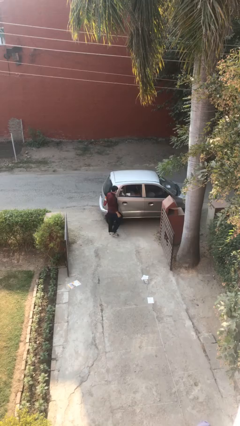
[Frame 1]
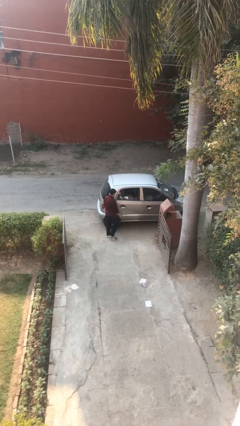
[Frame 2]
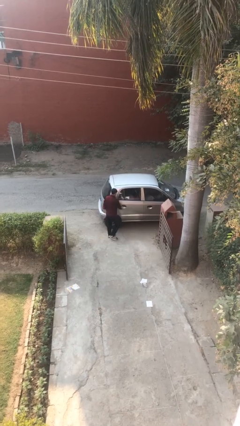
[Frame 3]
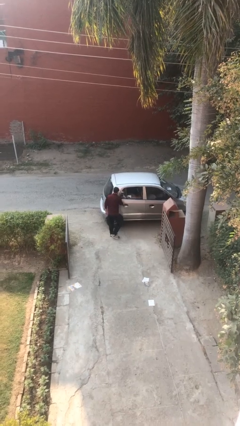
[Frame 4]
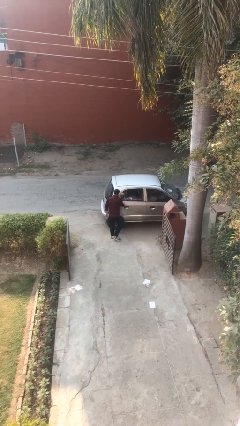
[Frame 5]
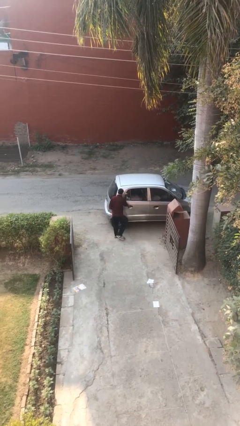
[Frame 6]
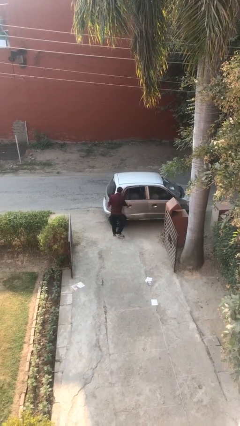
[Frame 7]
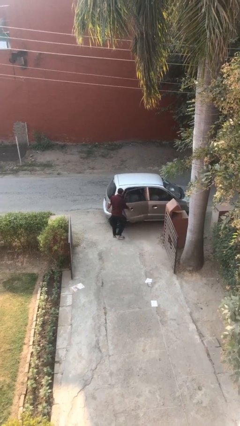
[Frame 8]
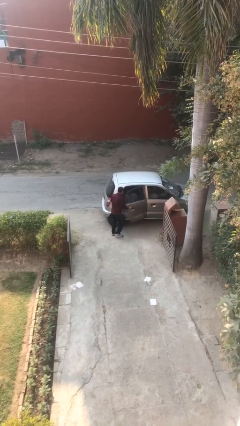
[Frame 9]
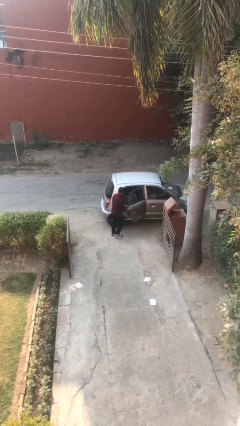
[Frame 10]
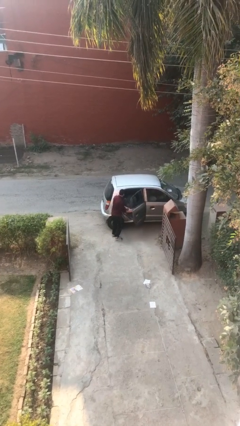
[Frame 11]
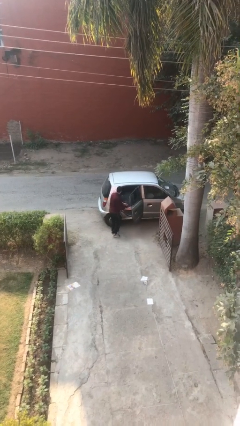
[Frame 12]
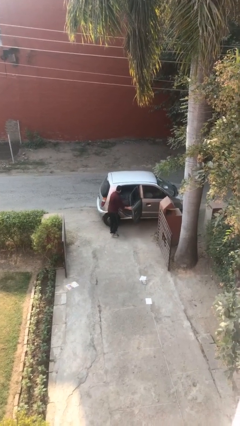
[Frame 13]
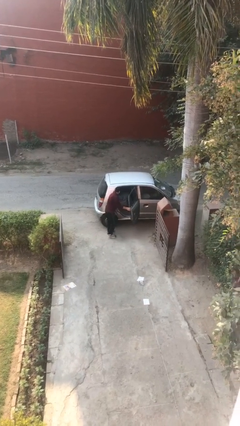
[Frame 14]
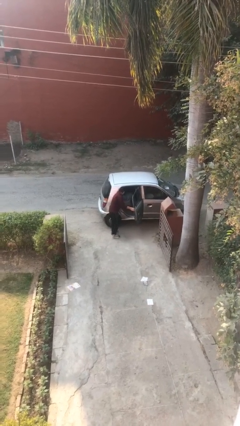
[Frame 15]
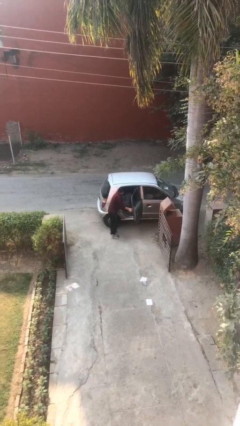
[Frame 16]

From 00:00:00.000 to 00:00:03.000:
person opens car door

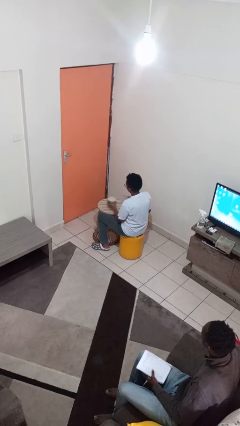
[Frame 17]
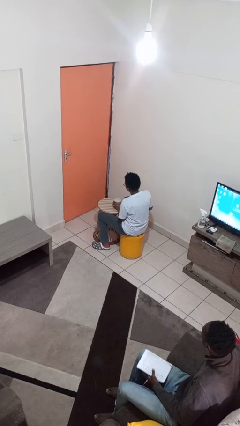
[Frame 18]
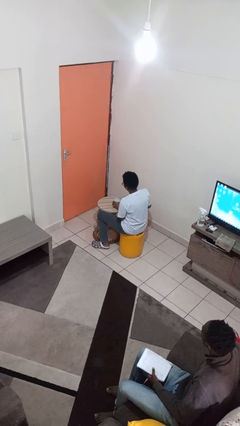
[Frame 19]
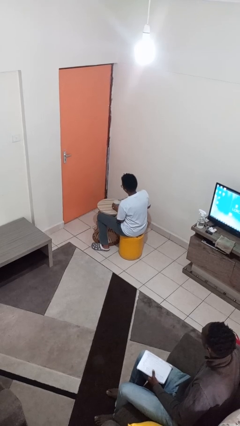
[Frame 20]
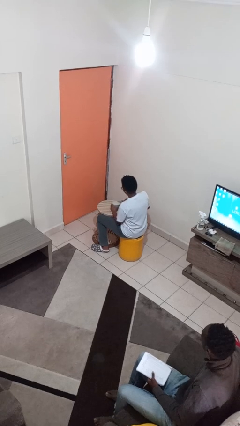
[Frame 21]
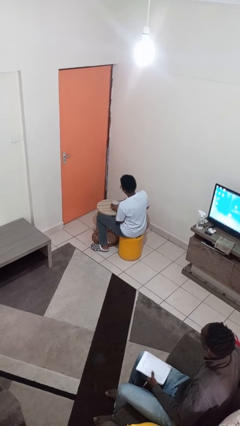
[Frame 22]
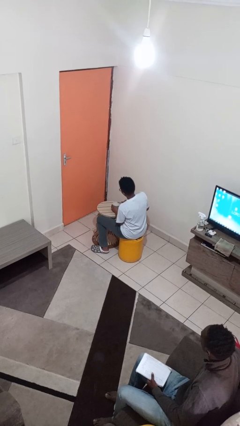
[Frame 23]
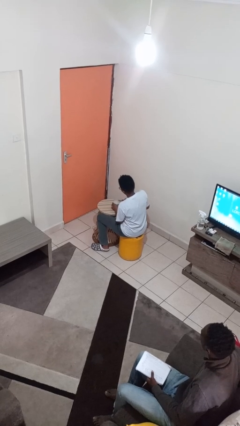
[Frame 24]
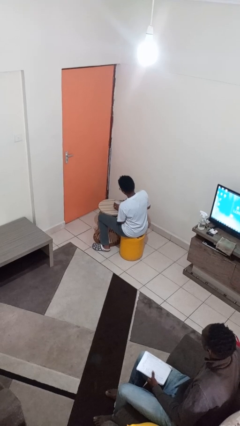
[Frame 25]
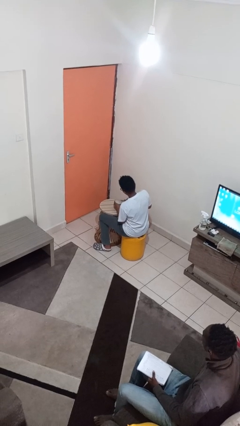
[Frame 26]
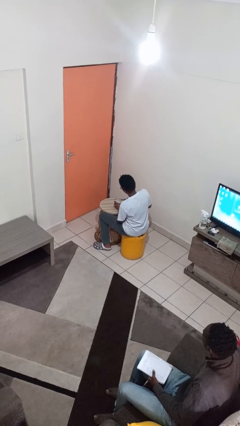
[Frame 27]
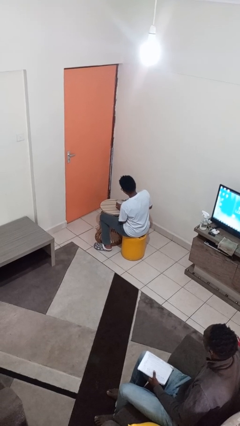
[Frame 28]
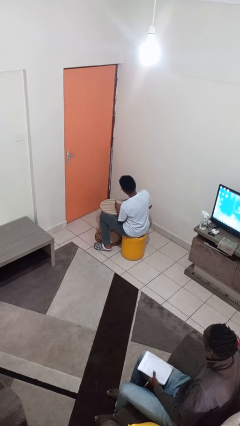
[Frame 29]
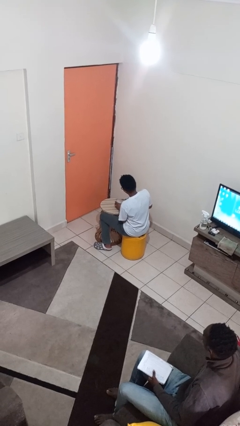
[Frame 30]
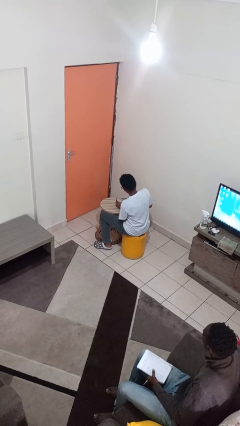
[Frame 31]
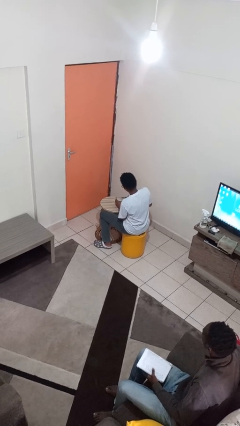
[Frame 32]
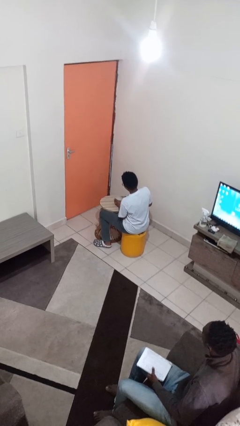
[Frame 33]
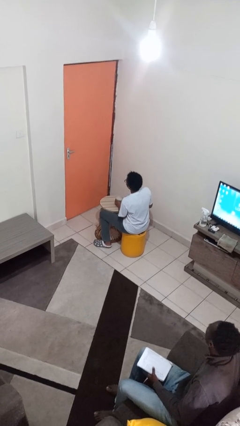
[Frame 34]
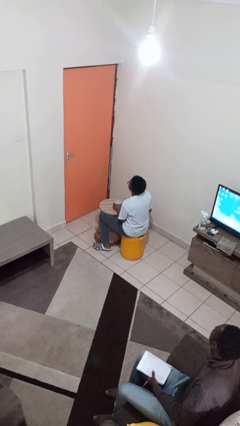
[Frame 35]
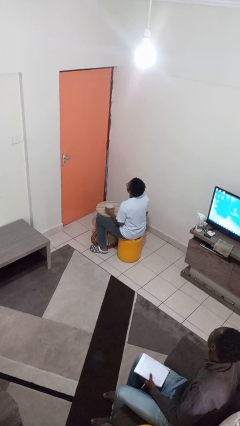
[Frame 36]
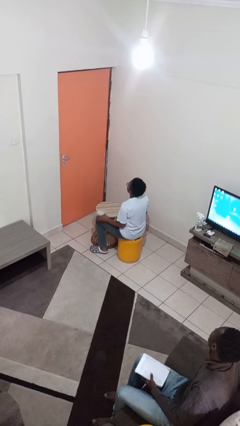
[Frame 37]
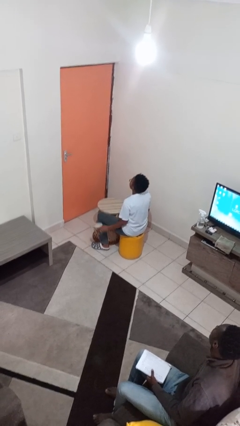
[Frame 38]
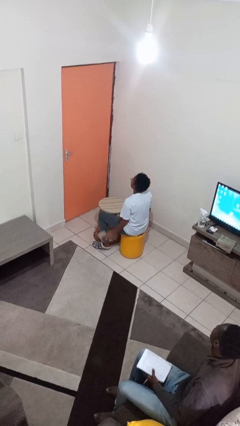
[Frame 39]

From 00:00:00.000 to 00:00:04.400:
person opens can with can opener

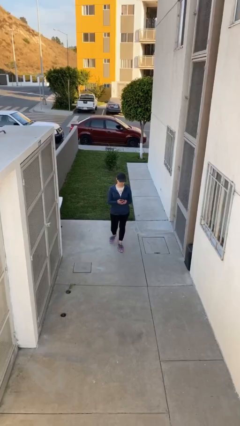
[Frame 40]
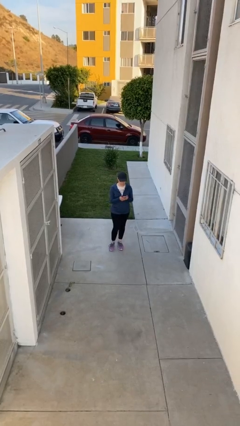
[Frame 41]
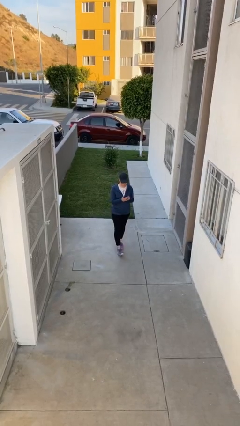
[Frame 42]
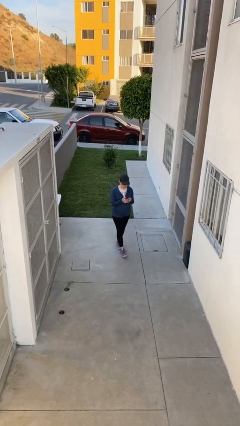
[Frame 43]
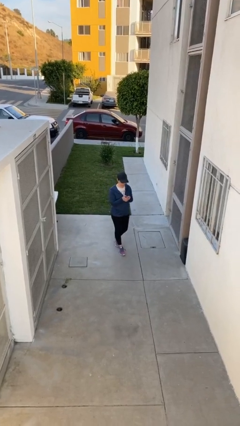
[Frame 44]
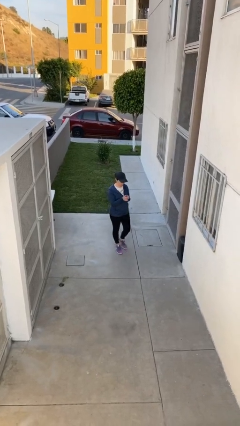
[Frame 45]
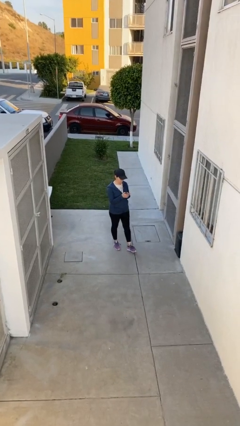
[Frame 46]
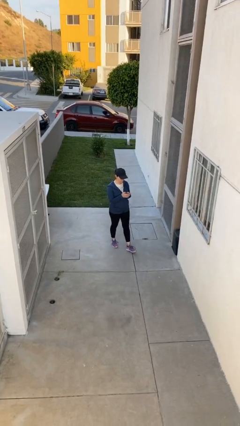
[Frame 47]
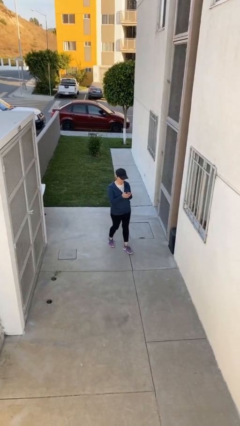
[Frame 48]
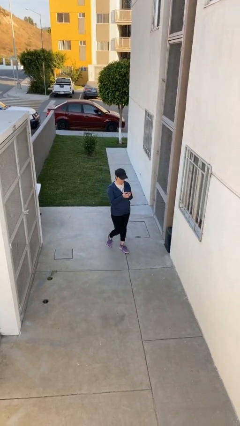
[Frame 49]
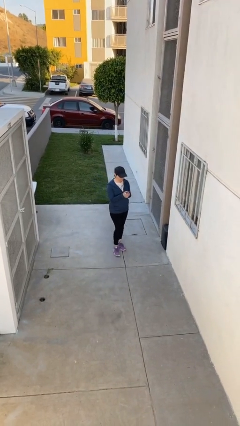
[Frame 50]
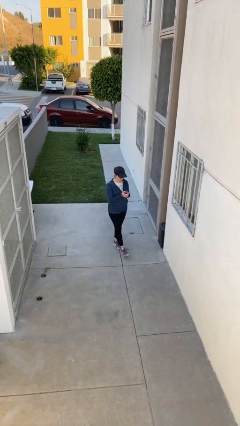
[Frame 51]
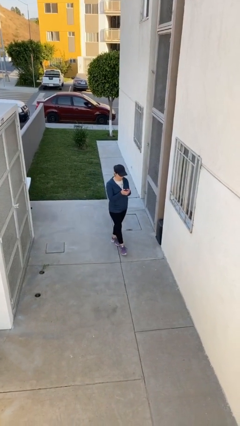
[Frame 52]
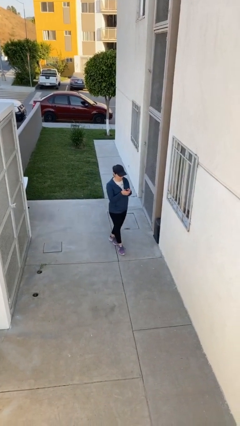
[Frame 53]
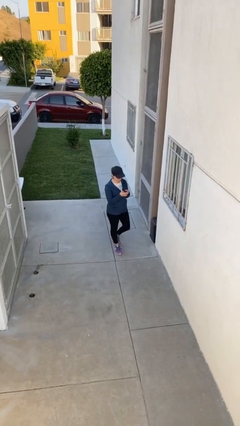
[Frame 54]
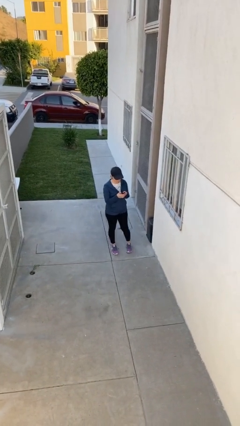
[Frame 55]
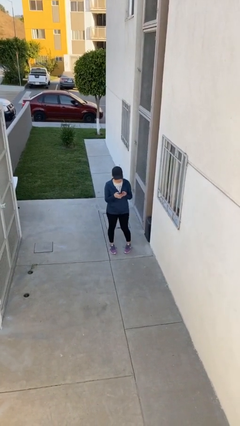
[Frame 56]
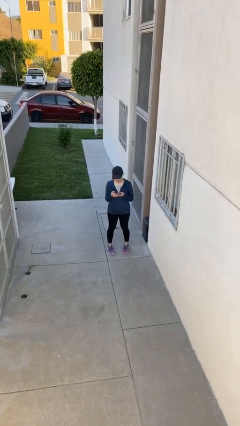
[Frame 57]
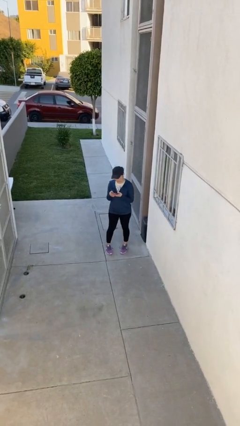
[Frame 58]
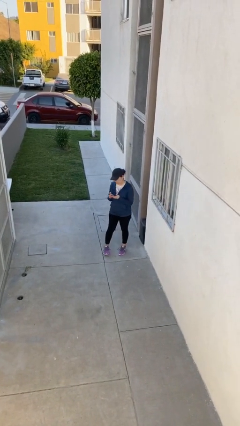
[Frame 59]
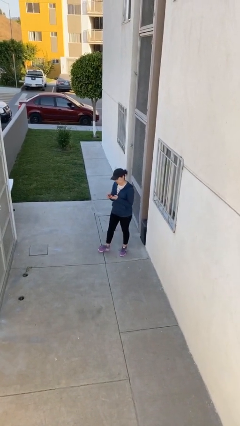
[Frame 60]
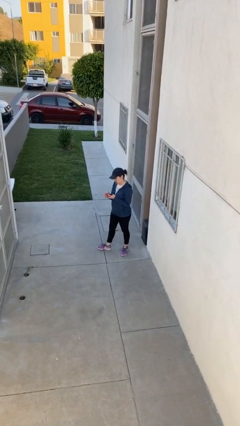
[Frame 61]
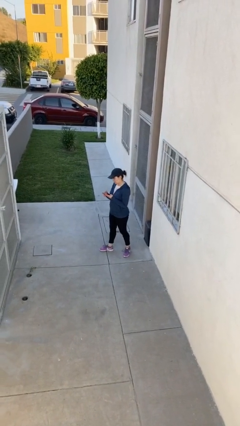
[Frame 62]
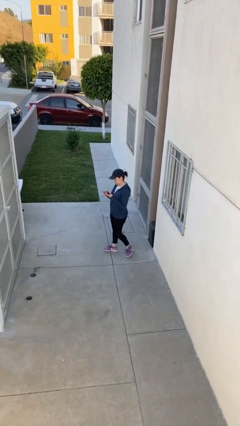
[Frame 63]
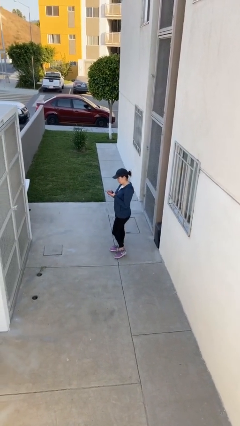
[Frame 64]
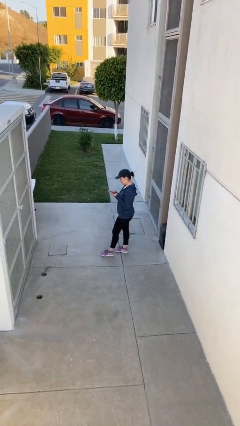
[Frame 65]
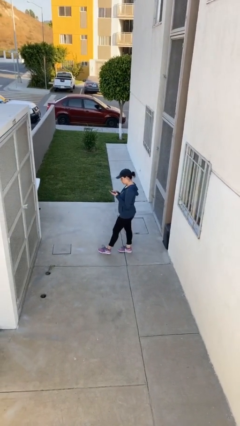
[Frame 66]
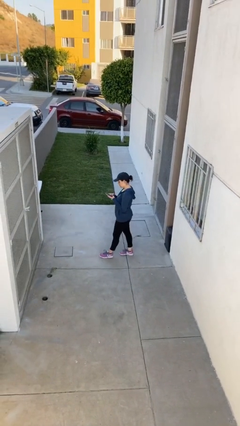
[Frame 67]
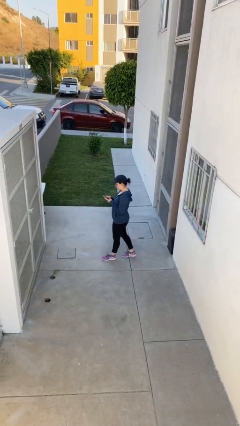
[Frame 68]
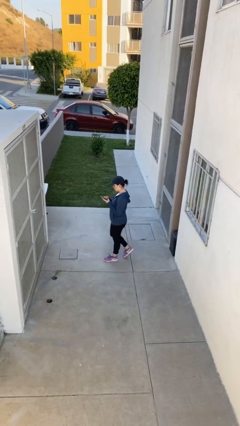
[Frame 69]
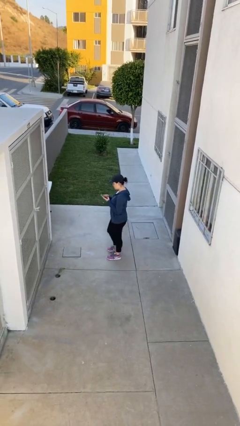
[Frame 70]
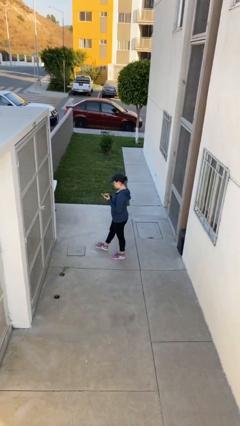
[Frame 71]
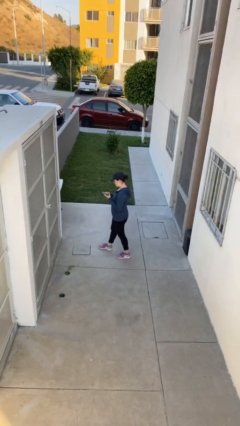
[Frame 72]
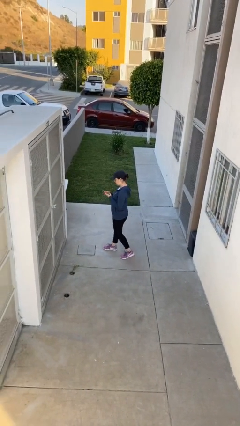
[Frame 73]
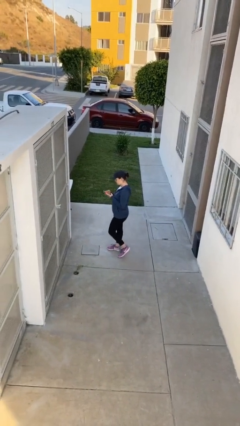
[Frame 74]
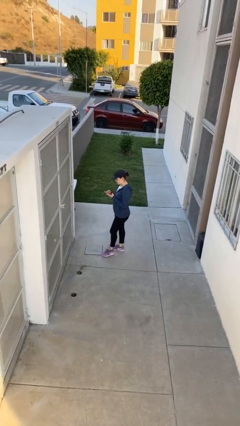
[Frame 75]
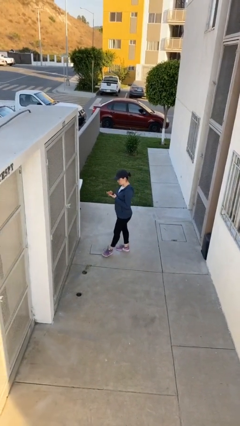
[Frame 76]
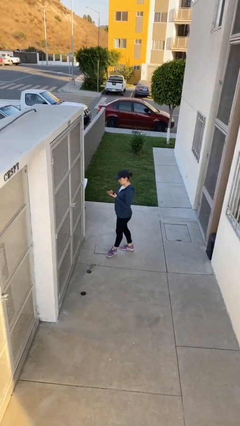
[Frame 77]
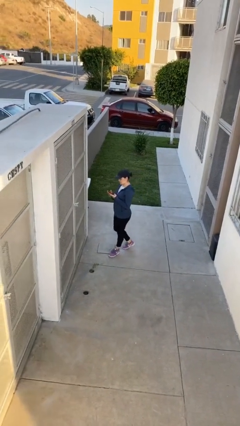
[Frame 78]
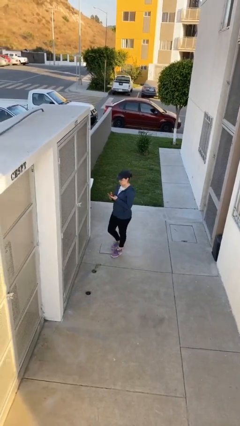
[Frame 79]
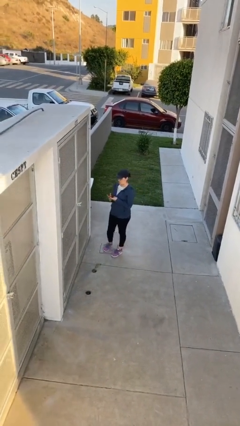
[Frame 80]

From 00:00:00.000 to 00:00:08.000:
person texts on phone

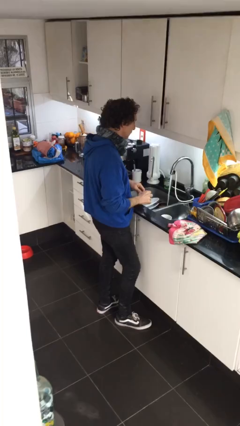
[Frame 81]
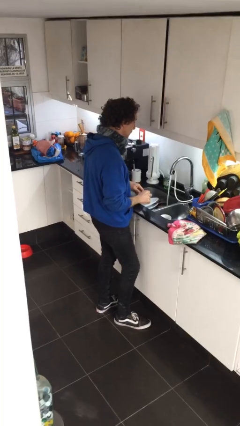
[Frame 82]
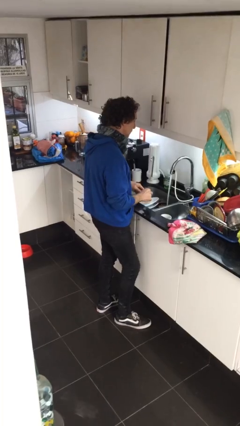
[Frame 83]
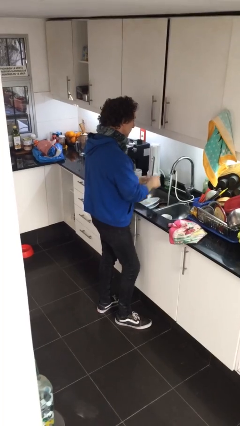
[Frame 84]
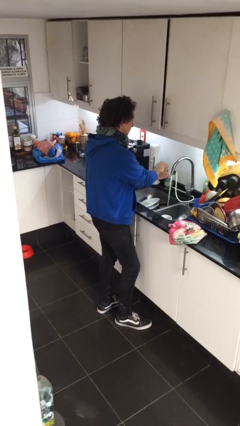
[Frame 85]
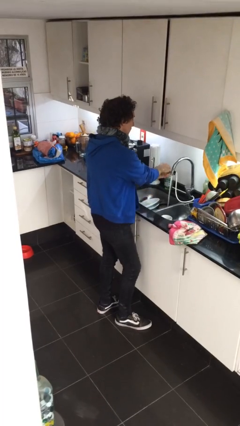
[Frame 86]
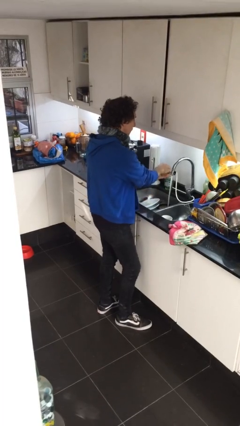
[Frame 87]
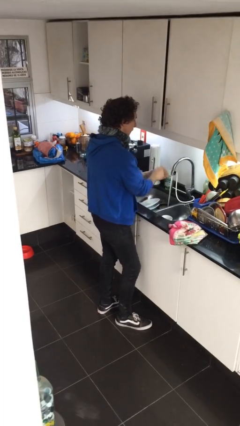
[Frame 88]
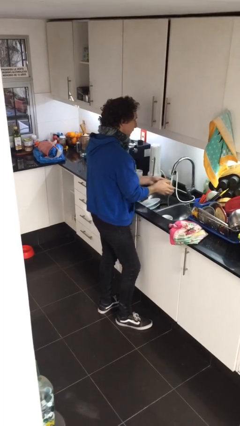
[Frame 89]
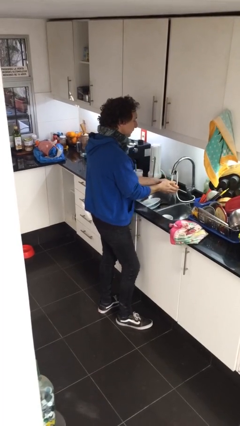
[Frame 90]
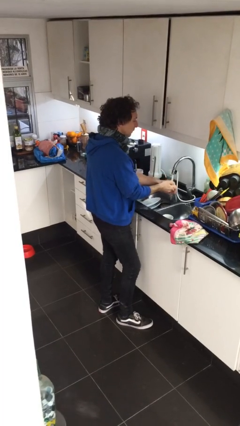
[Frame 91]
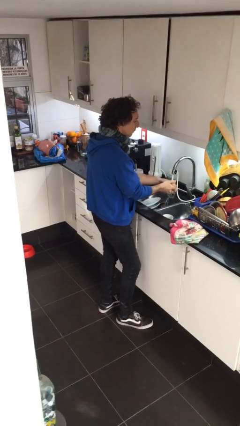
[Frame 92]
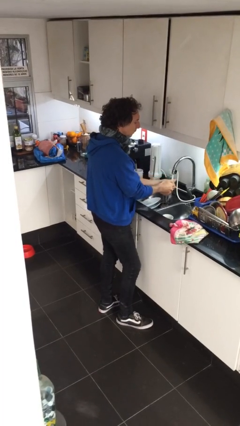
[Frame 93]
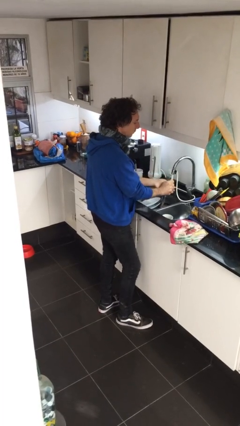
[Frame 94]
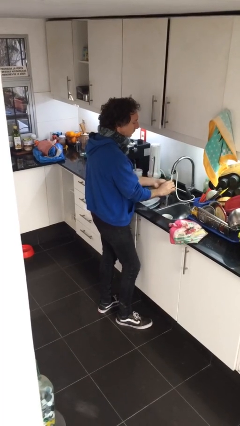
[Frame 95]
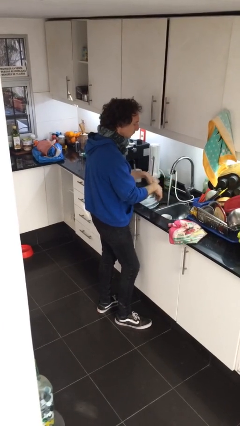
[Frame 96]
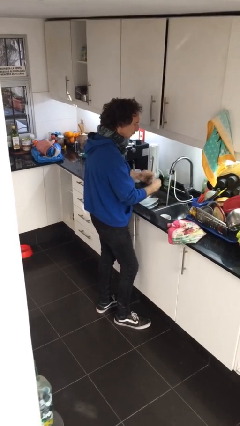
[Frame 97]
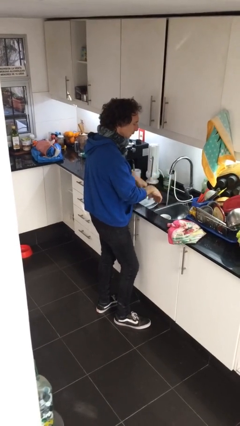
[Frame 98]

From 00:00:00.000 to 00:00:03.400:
person washes hands
